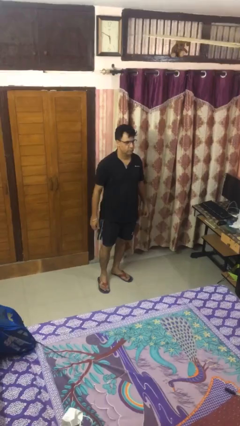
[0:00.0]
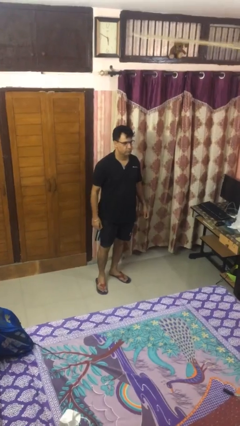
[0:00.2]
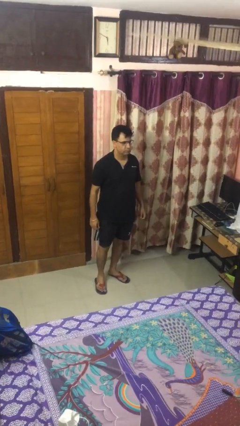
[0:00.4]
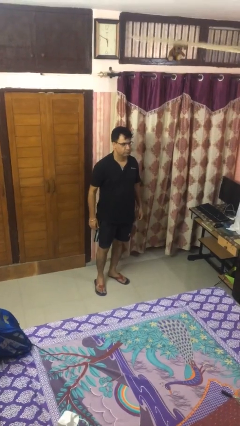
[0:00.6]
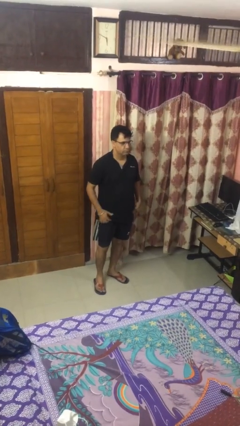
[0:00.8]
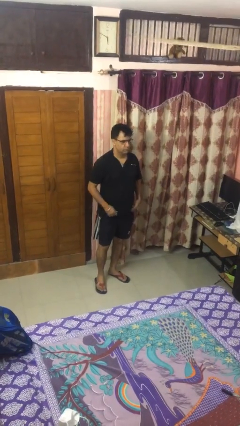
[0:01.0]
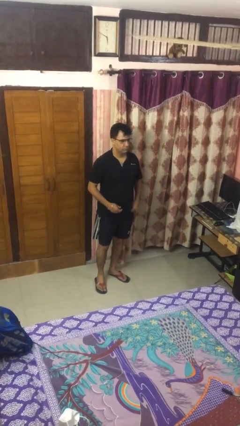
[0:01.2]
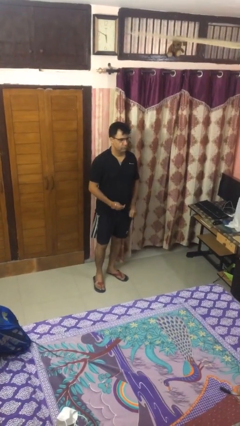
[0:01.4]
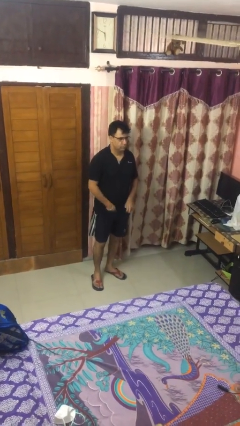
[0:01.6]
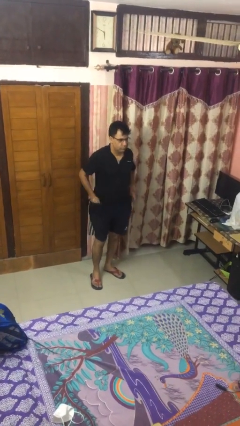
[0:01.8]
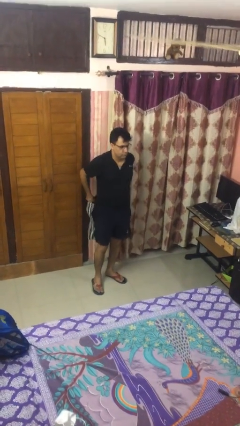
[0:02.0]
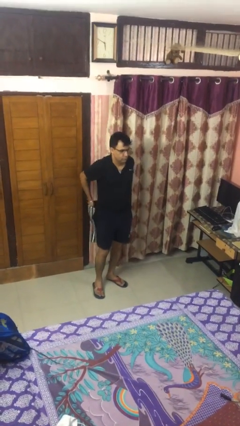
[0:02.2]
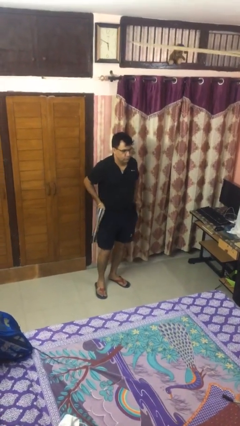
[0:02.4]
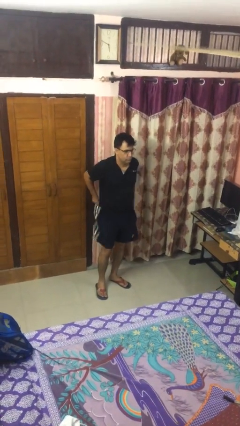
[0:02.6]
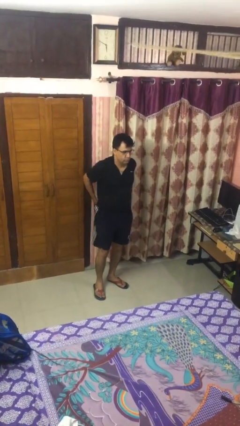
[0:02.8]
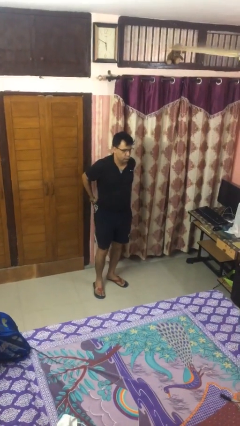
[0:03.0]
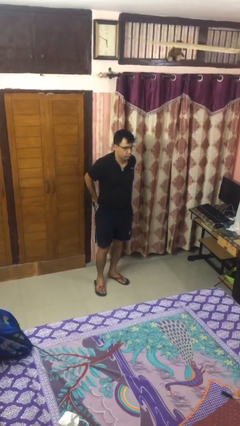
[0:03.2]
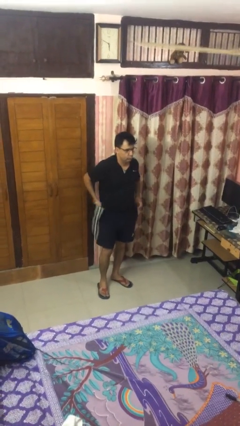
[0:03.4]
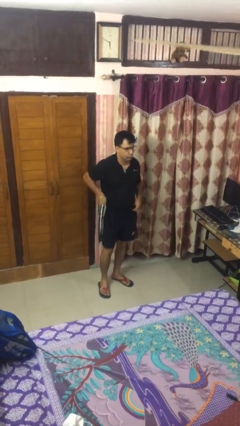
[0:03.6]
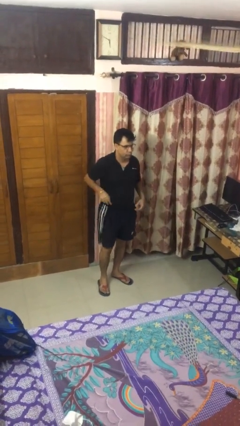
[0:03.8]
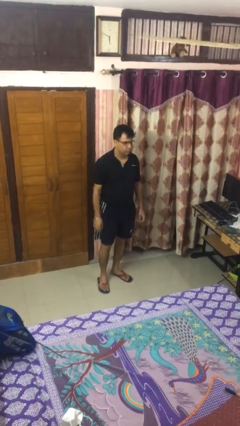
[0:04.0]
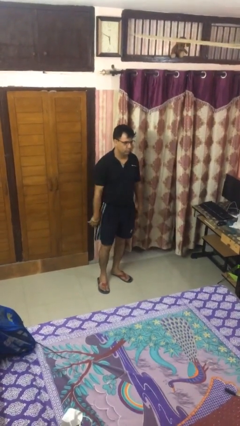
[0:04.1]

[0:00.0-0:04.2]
person tucks in shirt

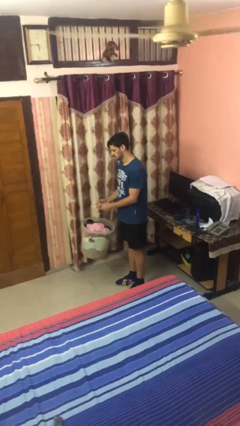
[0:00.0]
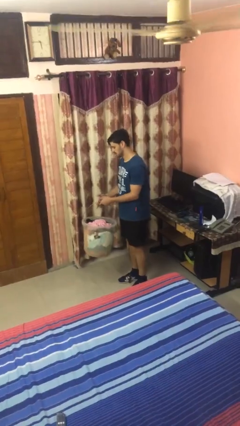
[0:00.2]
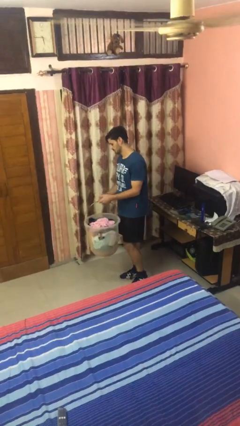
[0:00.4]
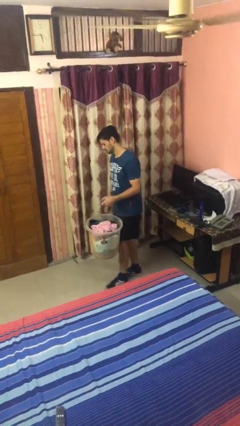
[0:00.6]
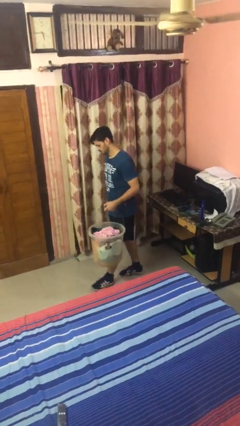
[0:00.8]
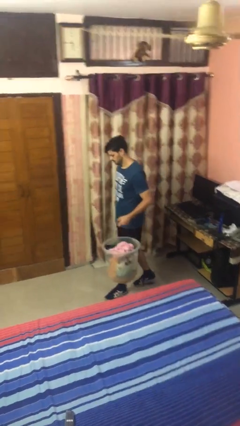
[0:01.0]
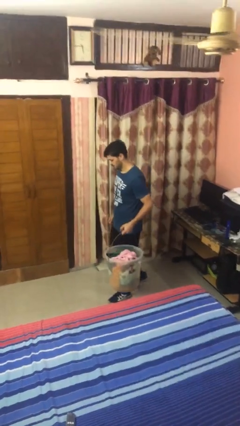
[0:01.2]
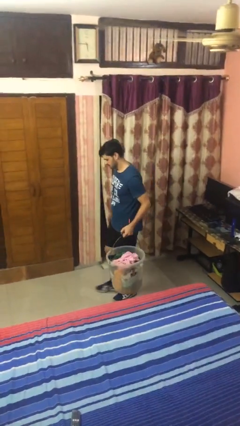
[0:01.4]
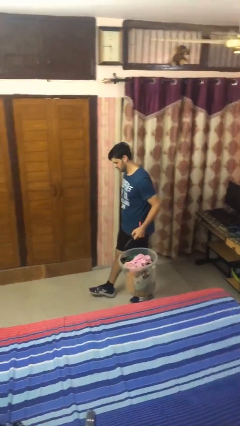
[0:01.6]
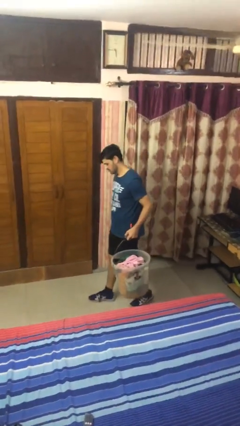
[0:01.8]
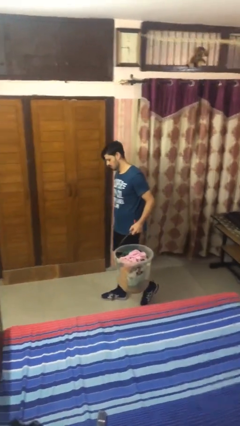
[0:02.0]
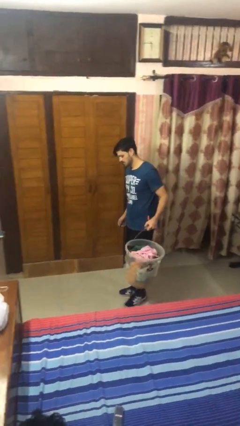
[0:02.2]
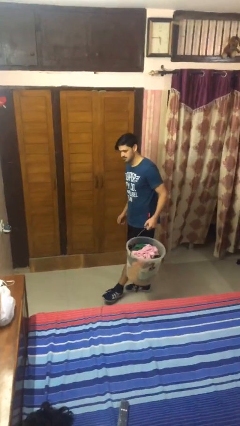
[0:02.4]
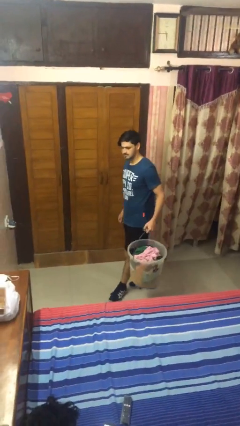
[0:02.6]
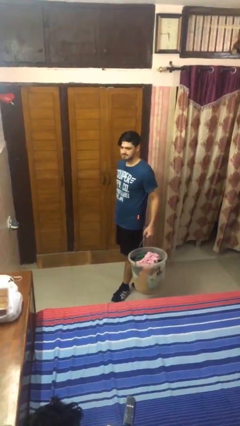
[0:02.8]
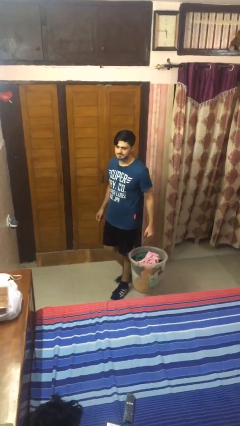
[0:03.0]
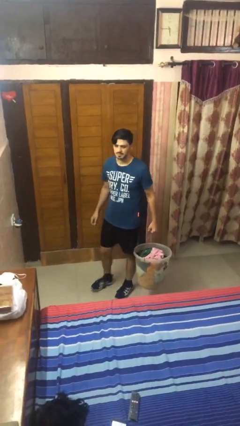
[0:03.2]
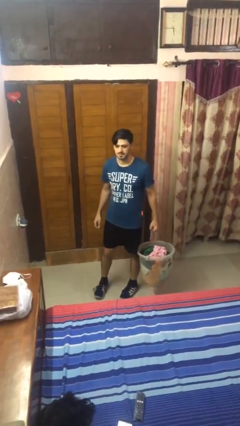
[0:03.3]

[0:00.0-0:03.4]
person carries laundry basket

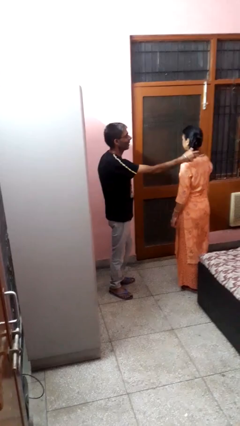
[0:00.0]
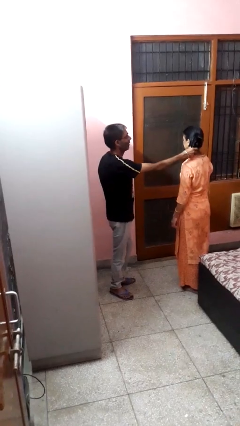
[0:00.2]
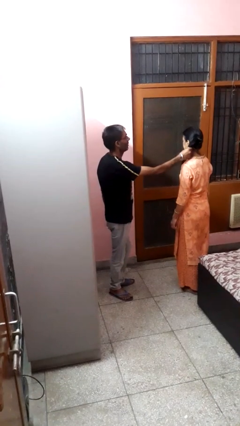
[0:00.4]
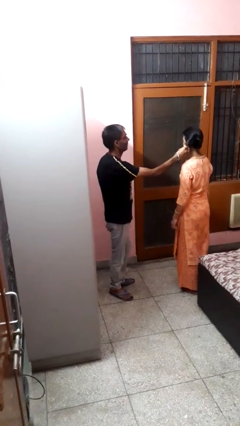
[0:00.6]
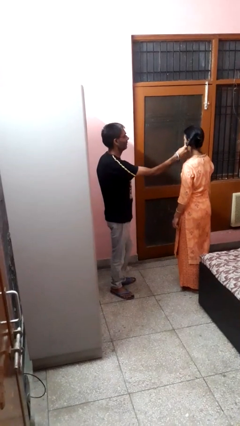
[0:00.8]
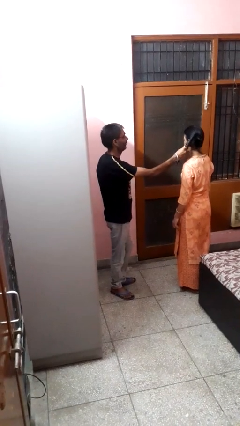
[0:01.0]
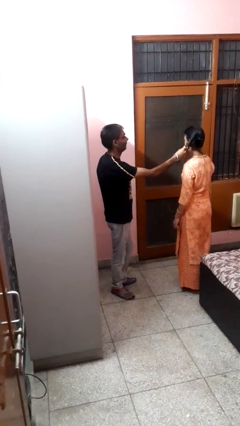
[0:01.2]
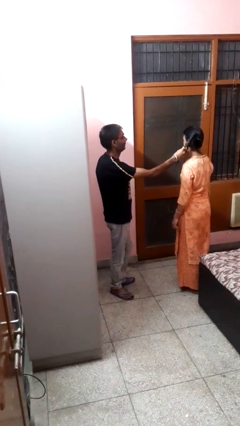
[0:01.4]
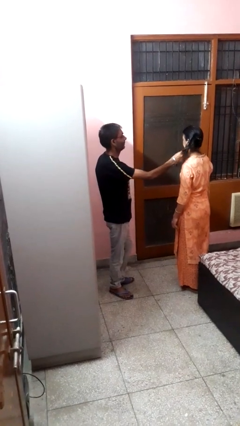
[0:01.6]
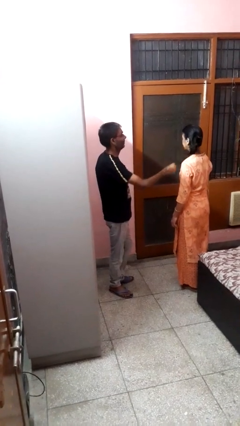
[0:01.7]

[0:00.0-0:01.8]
person grabs person by hair

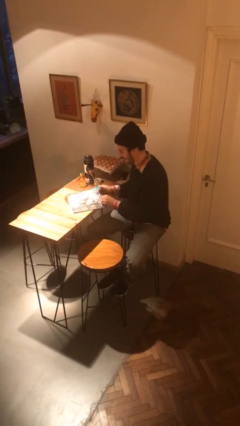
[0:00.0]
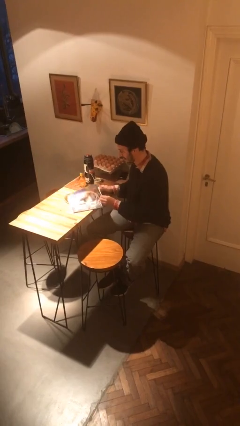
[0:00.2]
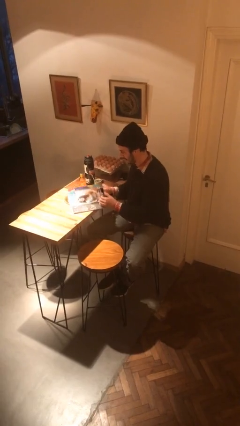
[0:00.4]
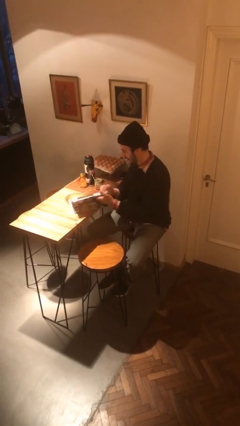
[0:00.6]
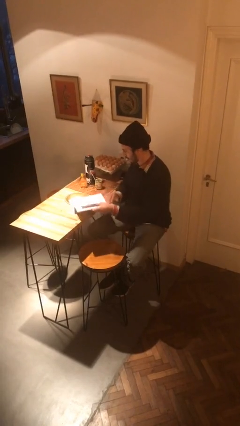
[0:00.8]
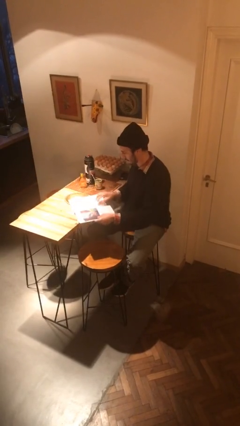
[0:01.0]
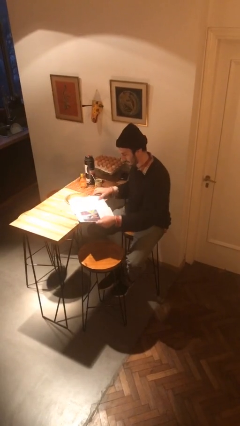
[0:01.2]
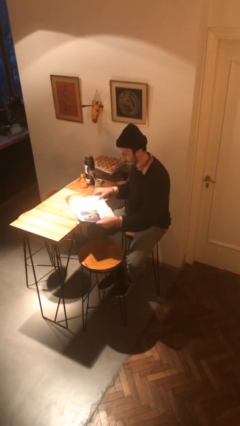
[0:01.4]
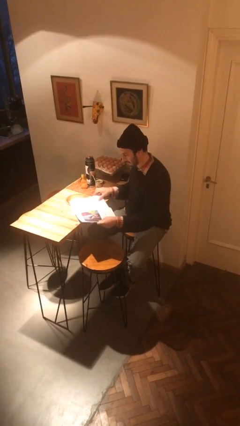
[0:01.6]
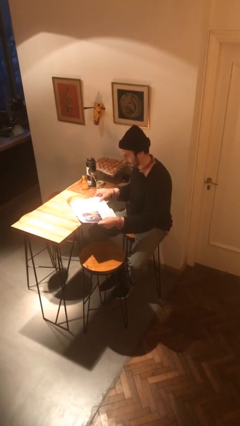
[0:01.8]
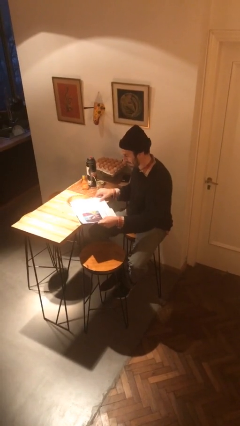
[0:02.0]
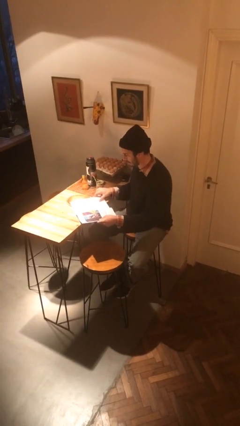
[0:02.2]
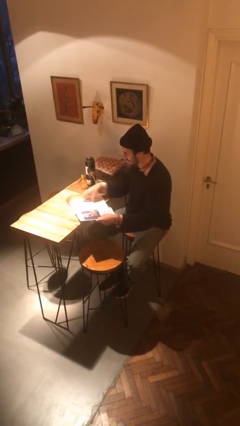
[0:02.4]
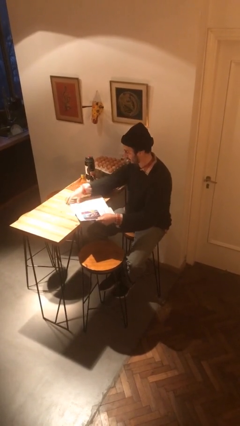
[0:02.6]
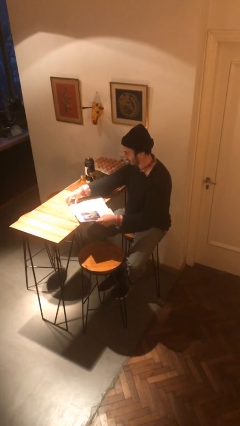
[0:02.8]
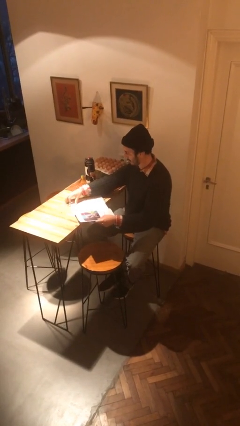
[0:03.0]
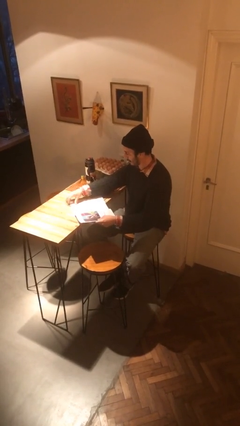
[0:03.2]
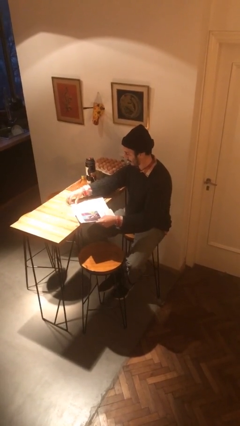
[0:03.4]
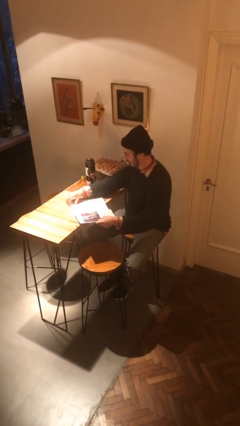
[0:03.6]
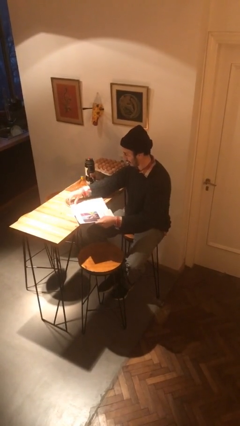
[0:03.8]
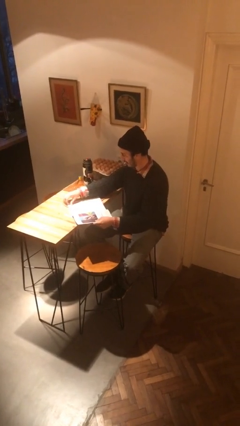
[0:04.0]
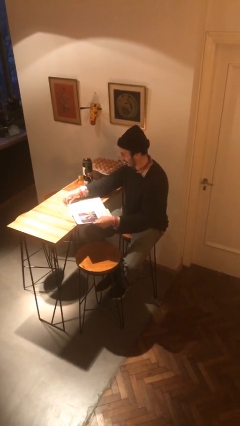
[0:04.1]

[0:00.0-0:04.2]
person reads magazine

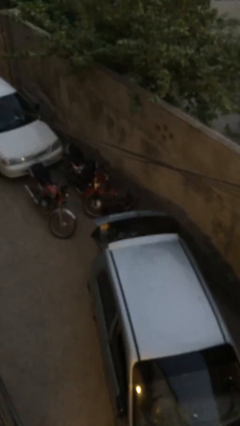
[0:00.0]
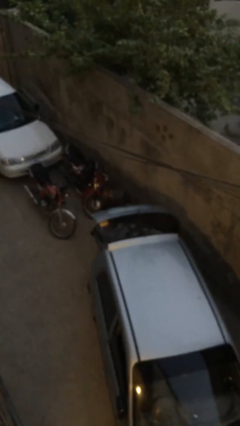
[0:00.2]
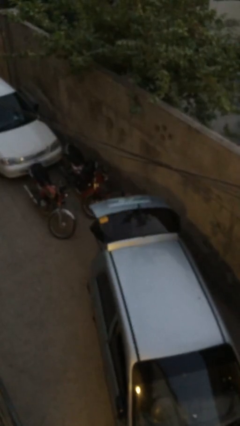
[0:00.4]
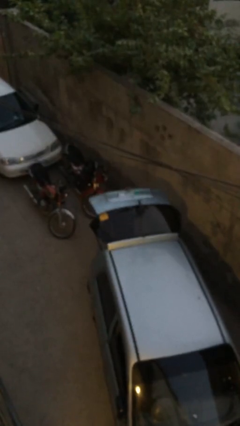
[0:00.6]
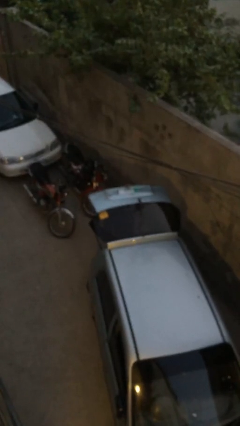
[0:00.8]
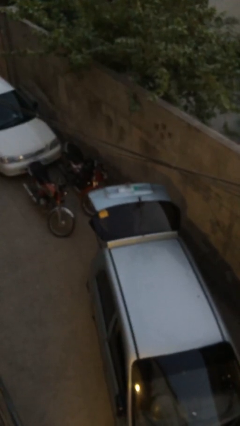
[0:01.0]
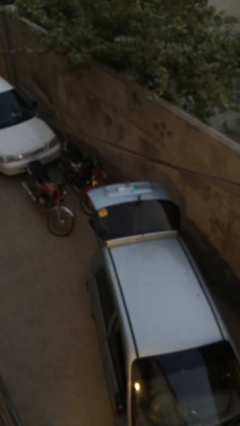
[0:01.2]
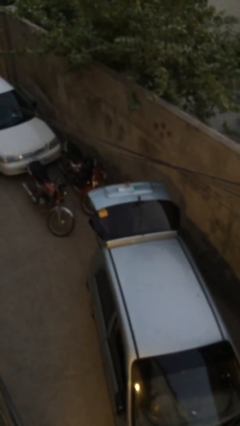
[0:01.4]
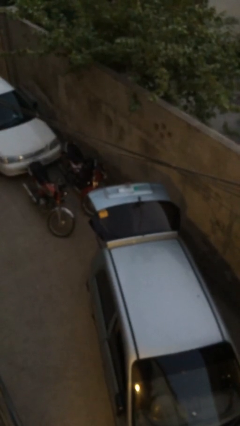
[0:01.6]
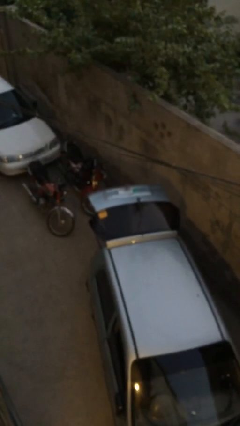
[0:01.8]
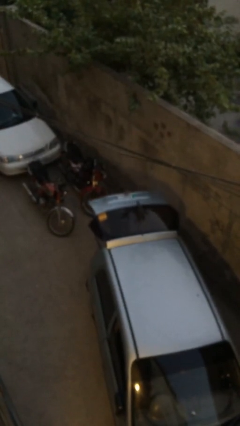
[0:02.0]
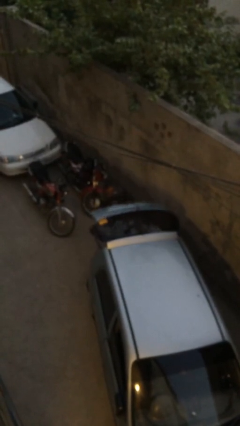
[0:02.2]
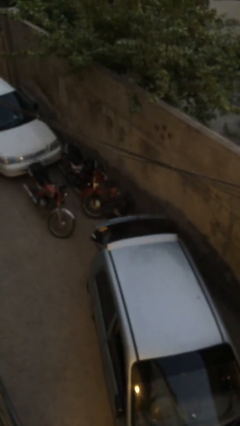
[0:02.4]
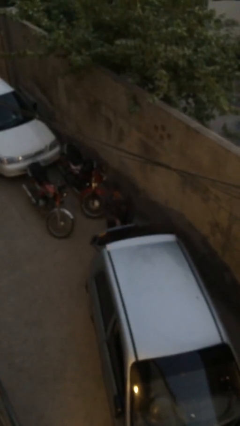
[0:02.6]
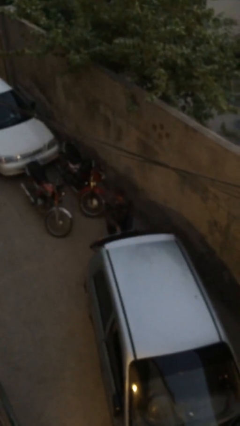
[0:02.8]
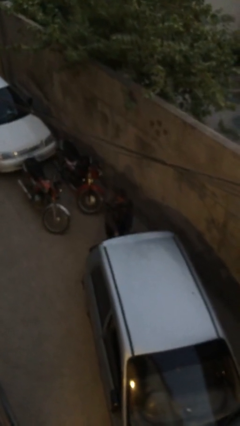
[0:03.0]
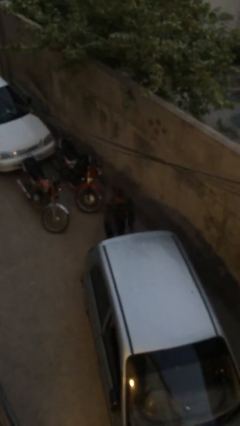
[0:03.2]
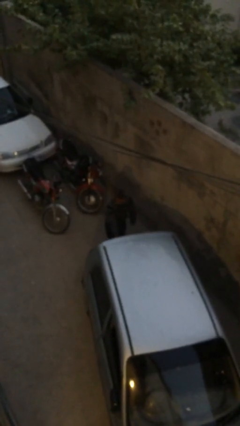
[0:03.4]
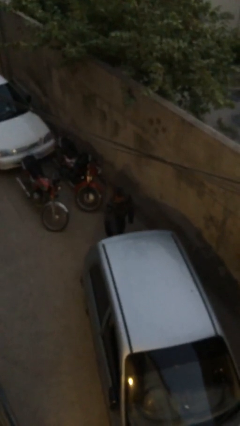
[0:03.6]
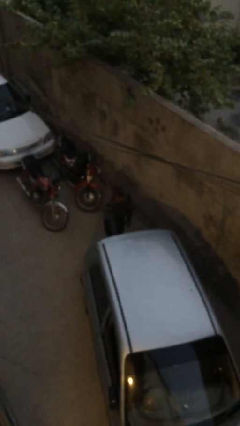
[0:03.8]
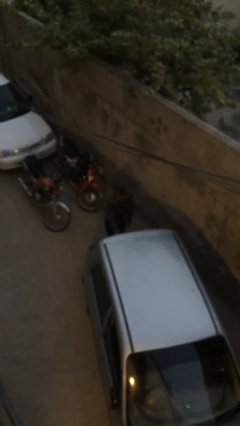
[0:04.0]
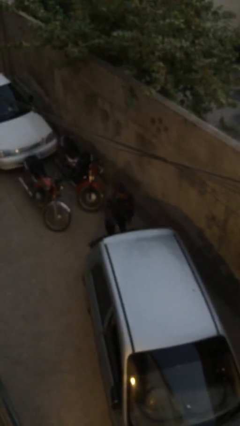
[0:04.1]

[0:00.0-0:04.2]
person loads car
